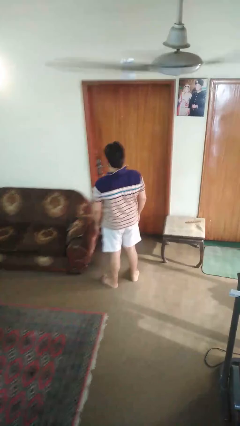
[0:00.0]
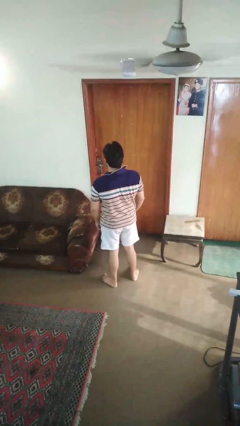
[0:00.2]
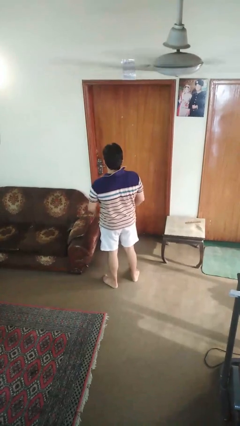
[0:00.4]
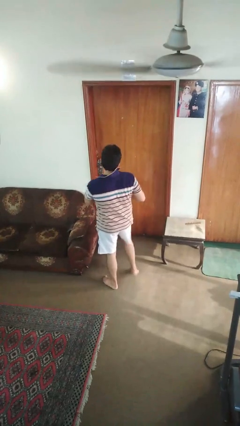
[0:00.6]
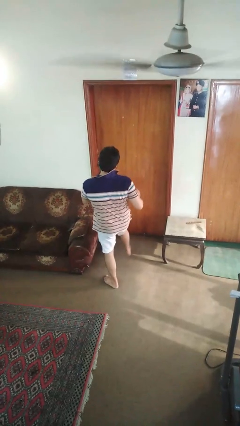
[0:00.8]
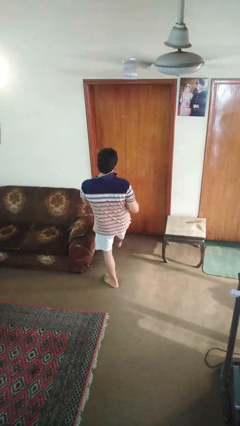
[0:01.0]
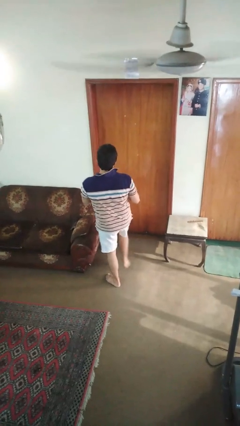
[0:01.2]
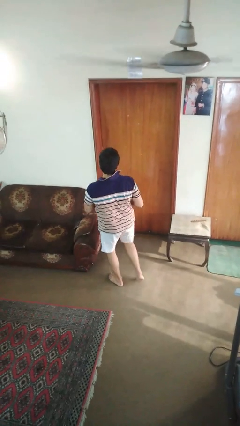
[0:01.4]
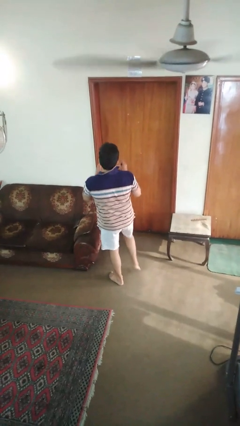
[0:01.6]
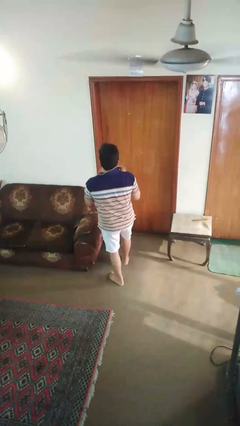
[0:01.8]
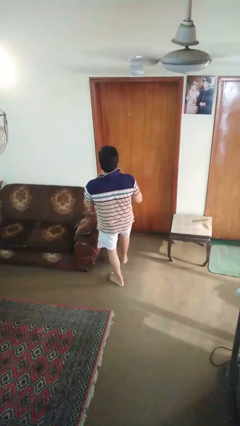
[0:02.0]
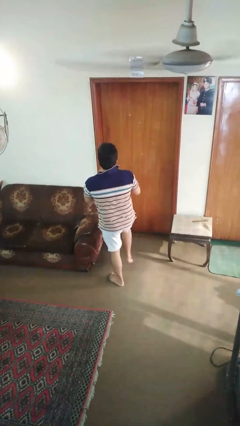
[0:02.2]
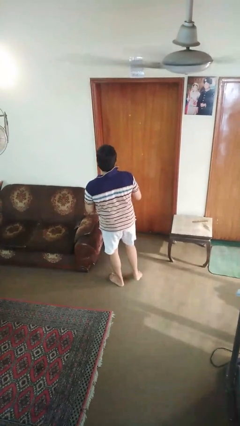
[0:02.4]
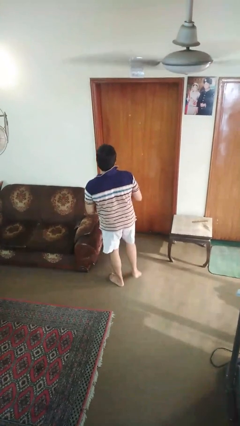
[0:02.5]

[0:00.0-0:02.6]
person dances in place

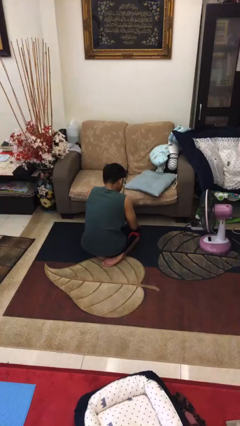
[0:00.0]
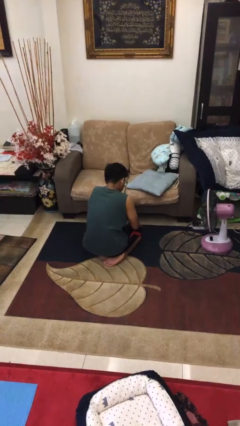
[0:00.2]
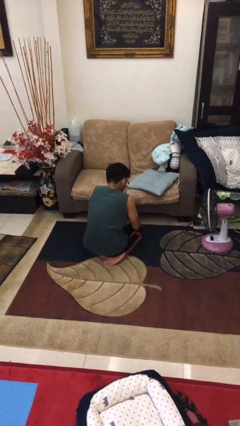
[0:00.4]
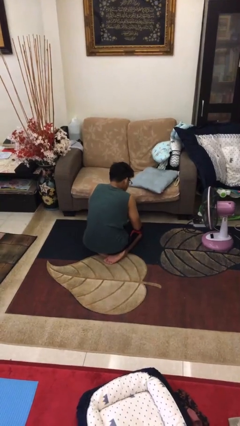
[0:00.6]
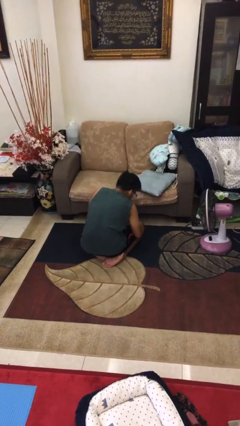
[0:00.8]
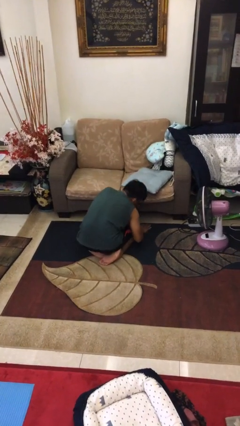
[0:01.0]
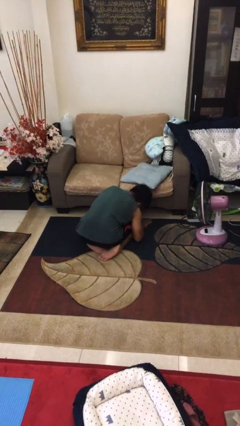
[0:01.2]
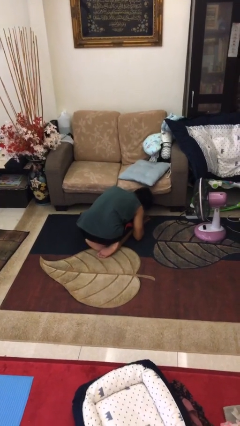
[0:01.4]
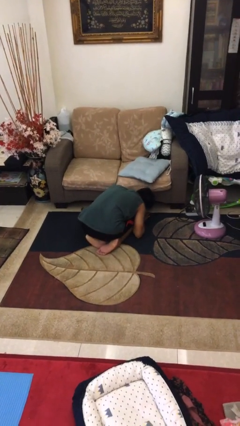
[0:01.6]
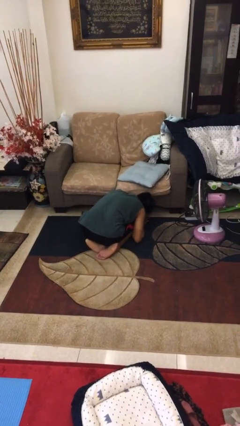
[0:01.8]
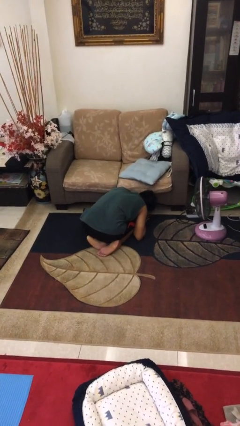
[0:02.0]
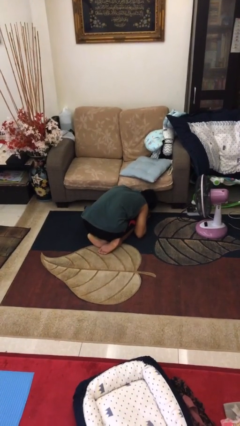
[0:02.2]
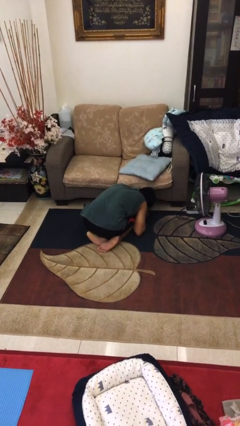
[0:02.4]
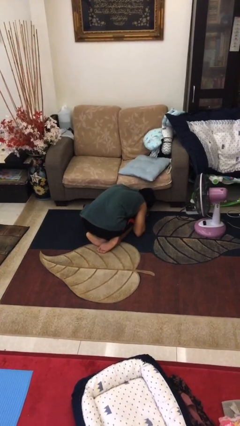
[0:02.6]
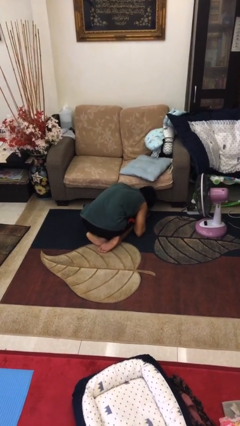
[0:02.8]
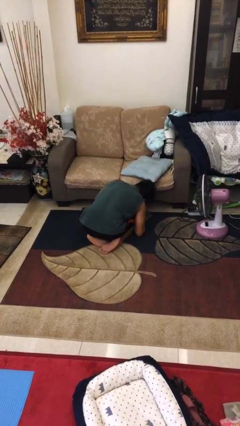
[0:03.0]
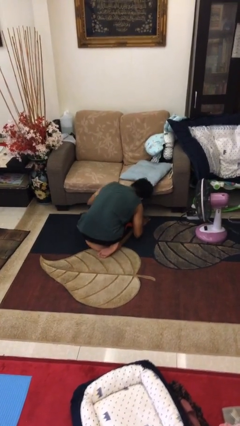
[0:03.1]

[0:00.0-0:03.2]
person searches under couch

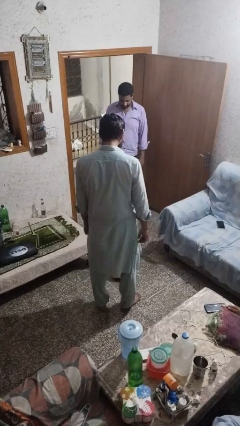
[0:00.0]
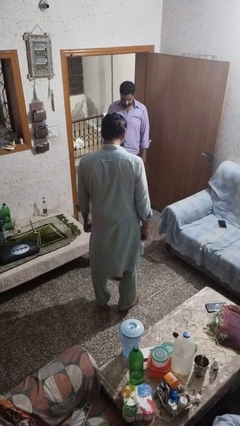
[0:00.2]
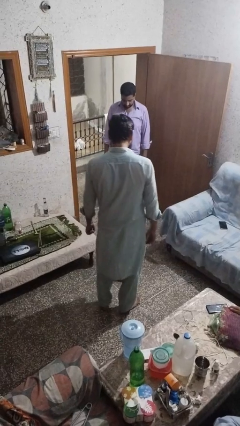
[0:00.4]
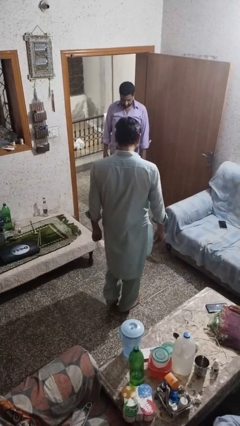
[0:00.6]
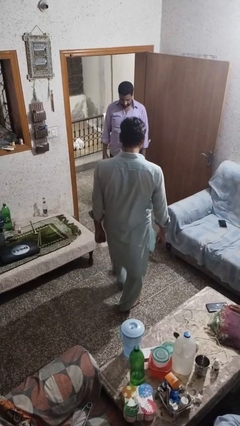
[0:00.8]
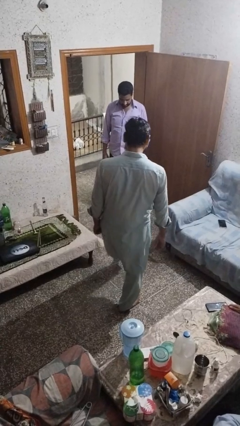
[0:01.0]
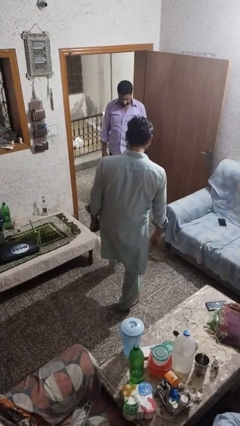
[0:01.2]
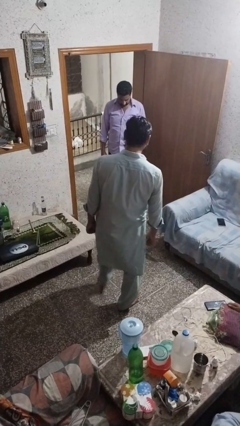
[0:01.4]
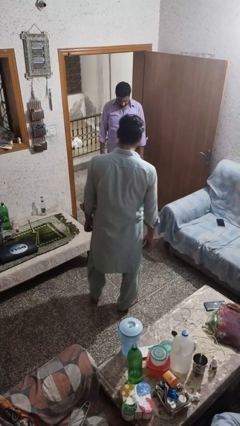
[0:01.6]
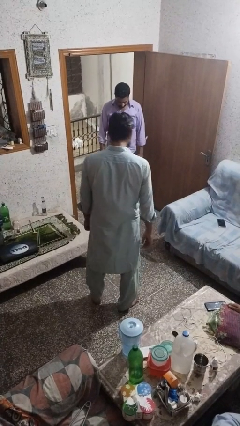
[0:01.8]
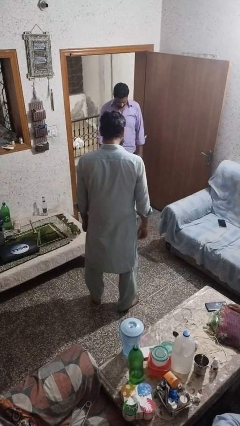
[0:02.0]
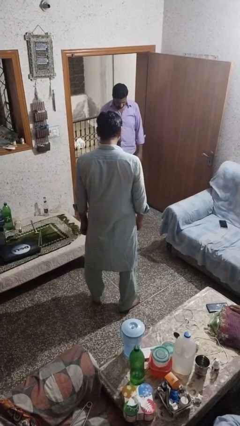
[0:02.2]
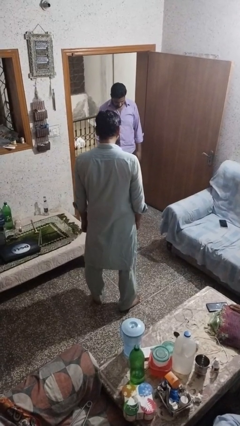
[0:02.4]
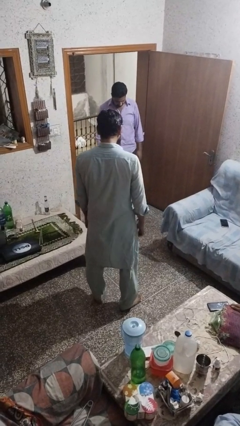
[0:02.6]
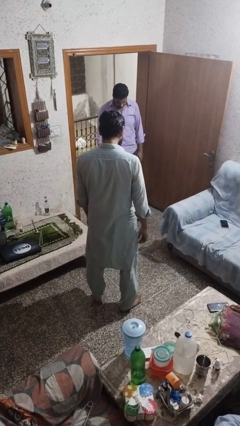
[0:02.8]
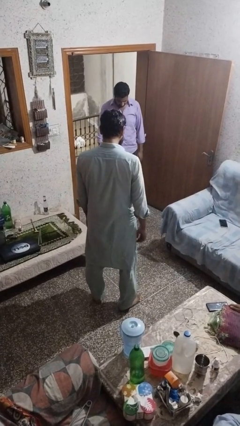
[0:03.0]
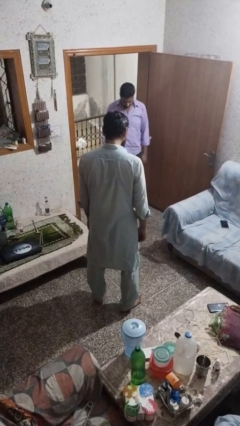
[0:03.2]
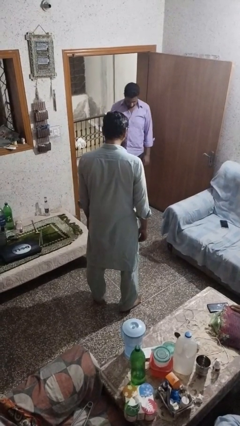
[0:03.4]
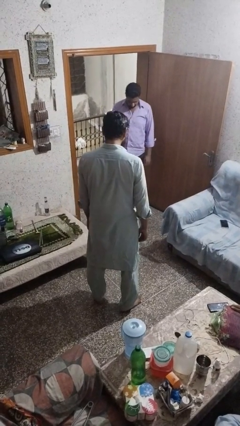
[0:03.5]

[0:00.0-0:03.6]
person kicks object to person

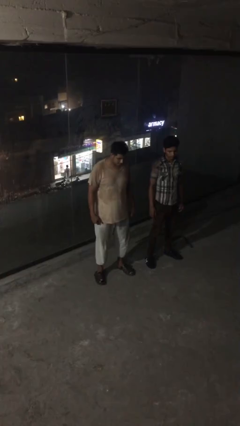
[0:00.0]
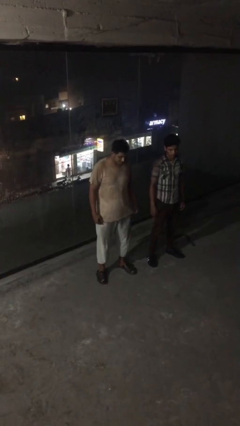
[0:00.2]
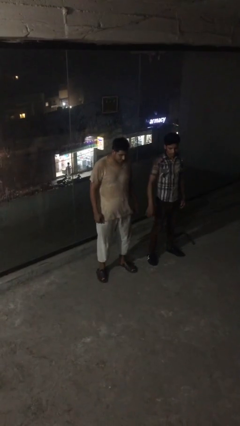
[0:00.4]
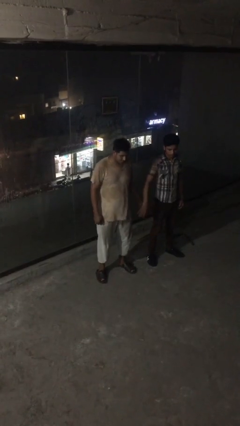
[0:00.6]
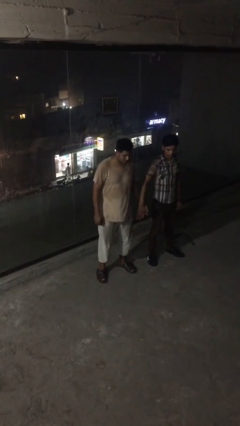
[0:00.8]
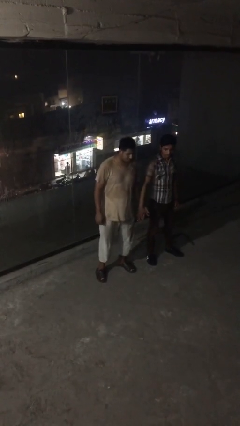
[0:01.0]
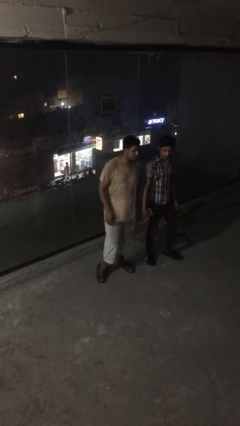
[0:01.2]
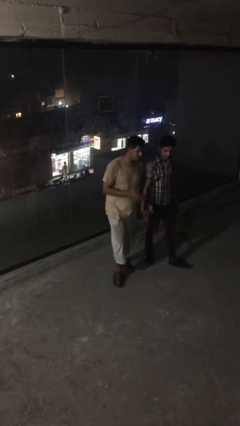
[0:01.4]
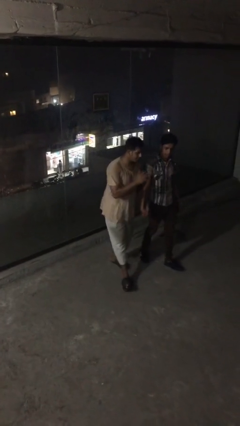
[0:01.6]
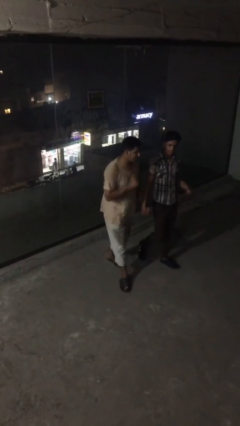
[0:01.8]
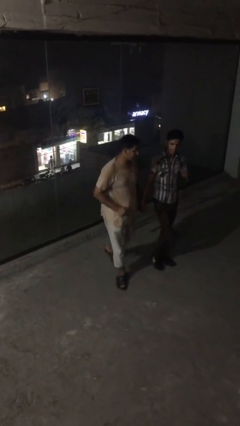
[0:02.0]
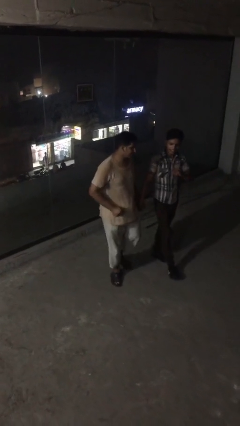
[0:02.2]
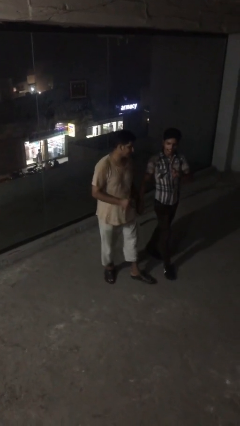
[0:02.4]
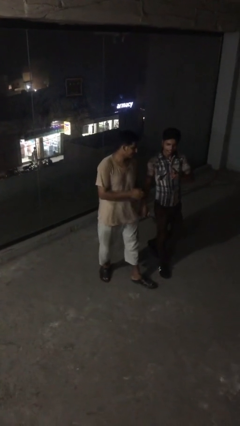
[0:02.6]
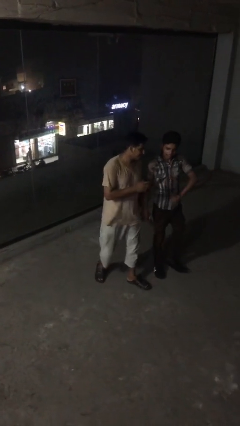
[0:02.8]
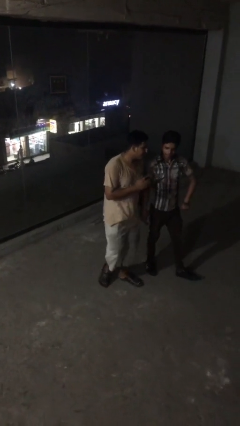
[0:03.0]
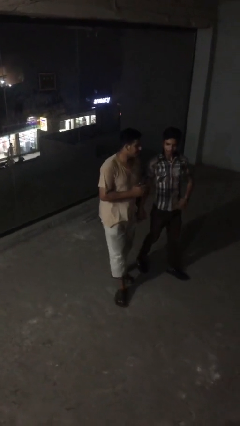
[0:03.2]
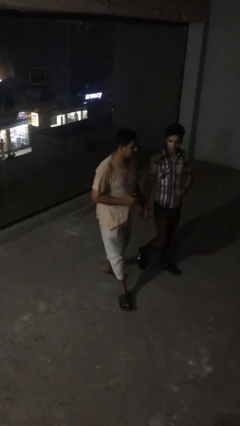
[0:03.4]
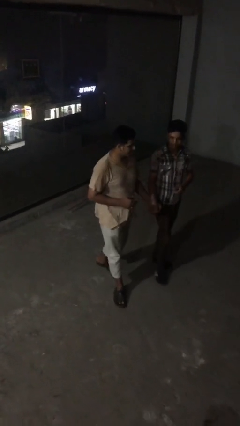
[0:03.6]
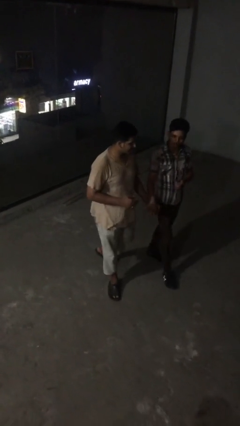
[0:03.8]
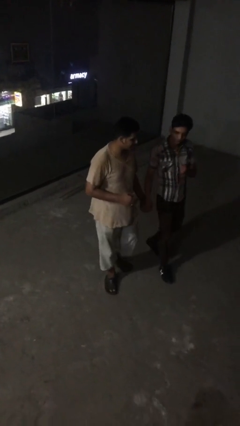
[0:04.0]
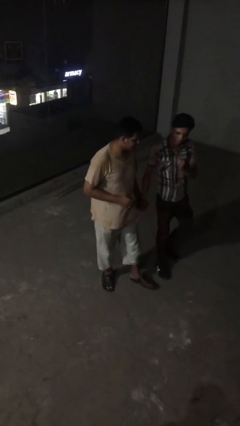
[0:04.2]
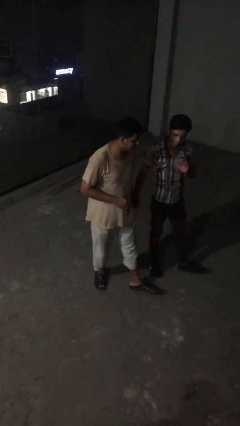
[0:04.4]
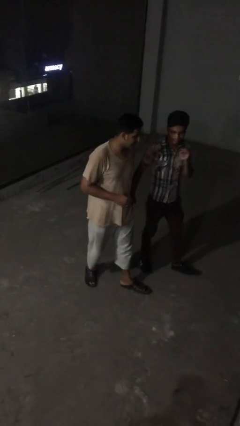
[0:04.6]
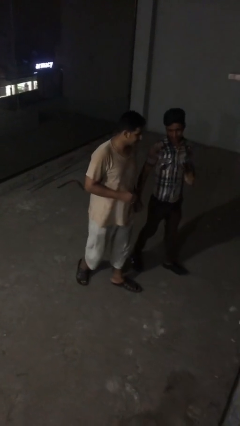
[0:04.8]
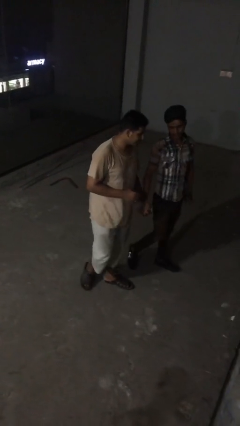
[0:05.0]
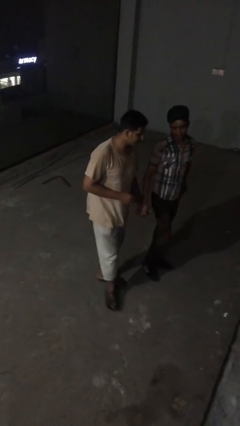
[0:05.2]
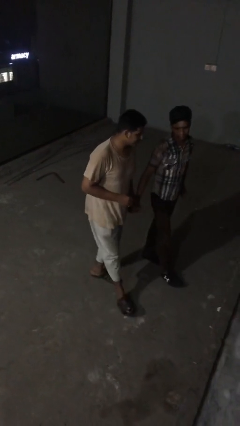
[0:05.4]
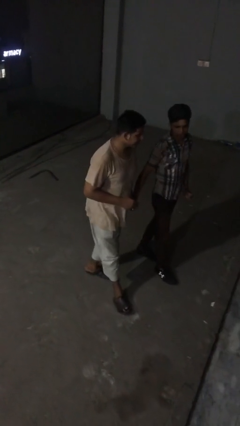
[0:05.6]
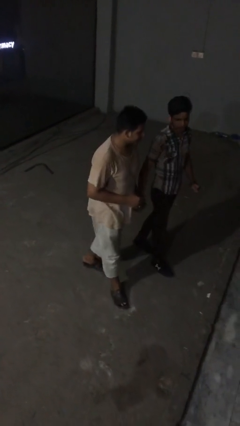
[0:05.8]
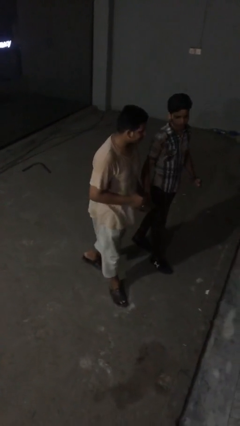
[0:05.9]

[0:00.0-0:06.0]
person holds hand

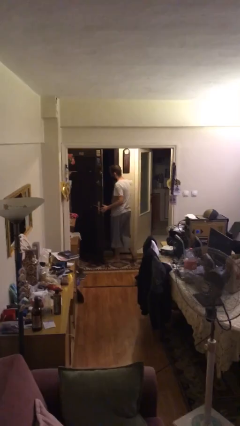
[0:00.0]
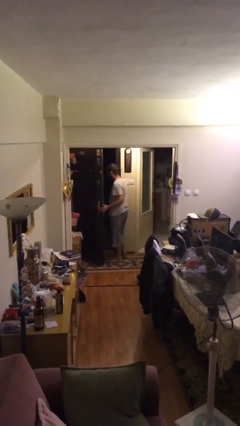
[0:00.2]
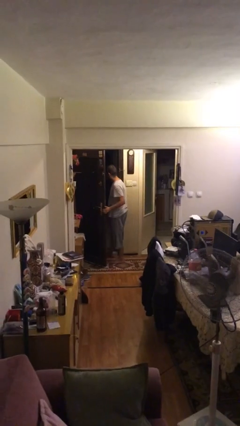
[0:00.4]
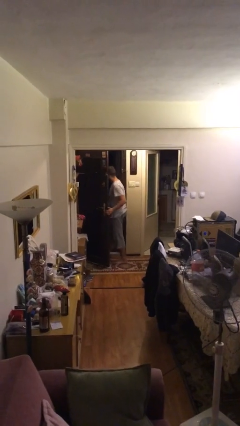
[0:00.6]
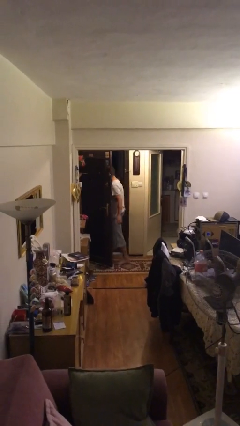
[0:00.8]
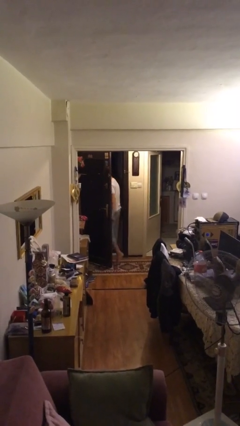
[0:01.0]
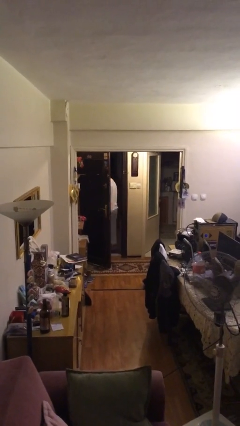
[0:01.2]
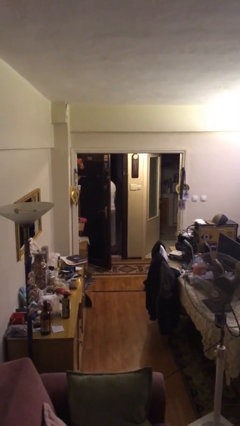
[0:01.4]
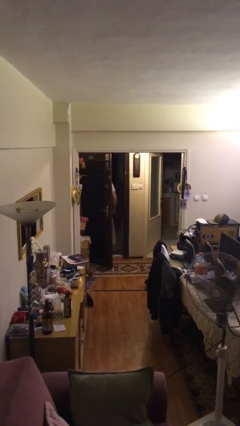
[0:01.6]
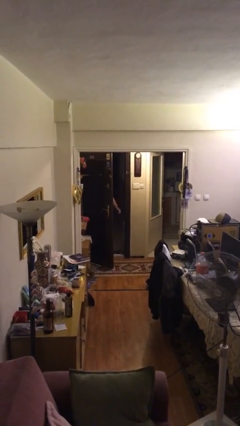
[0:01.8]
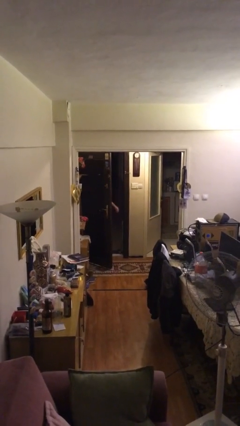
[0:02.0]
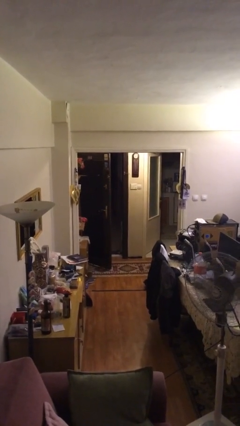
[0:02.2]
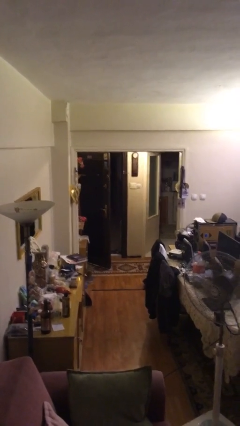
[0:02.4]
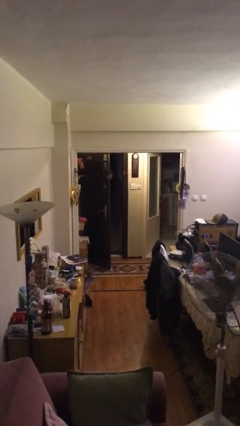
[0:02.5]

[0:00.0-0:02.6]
person exits scene through structure
